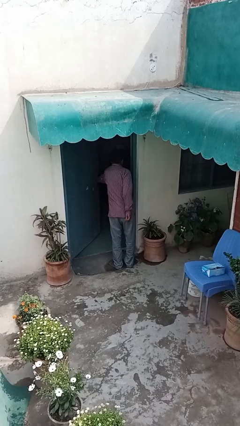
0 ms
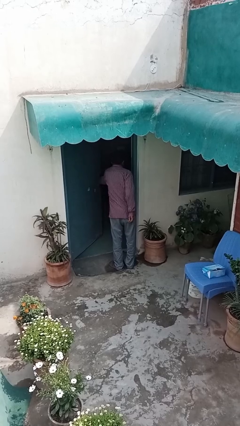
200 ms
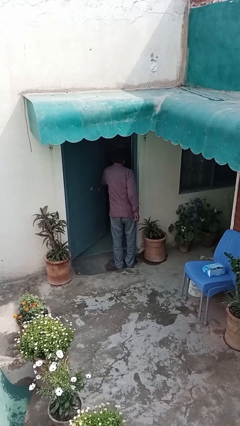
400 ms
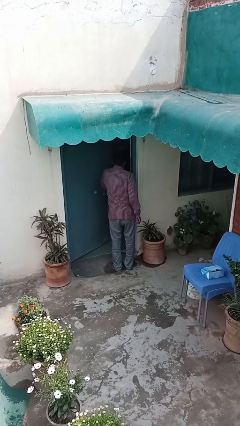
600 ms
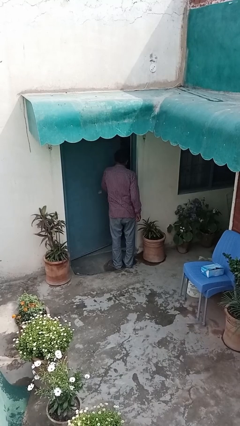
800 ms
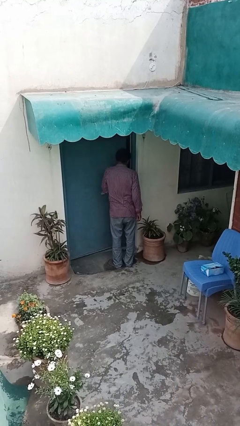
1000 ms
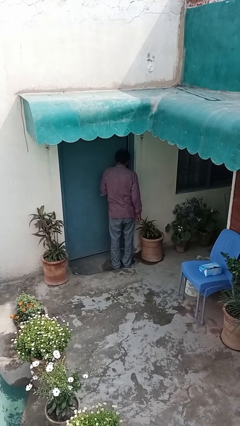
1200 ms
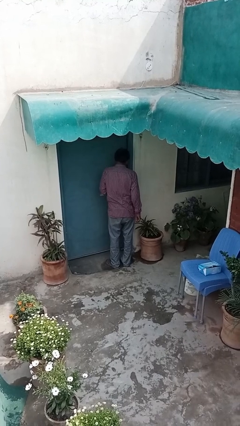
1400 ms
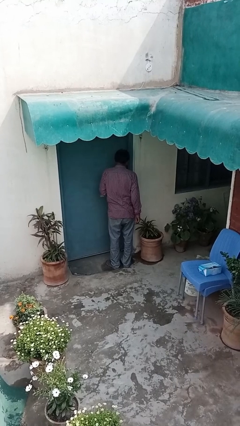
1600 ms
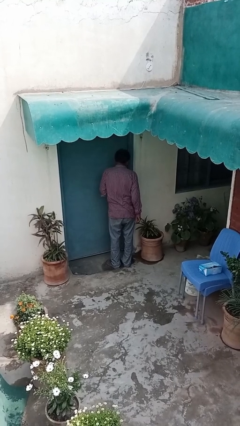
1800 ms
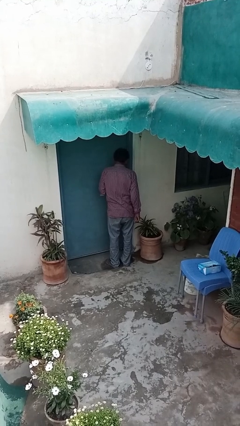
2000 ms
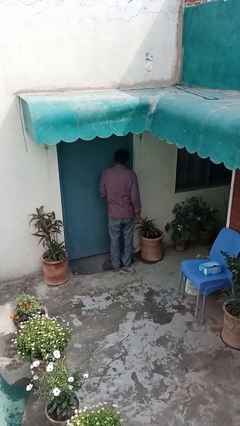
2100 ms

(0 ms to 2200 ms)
person closes facility door

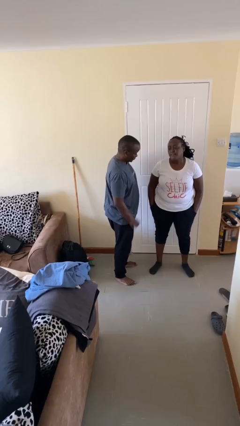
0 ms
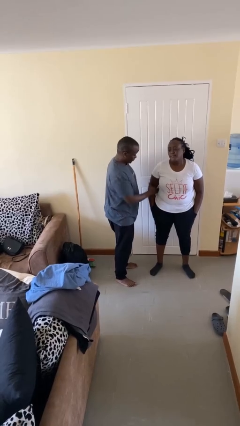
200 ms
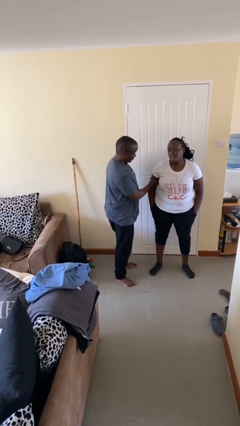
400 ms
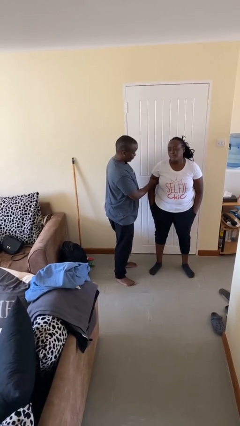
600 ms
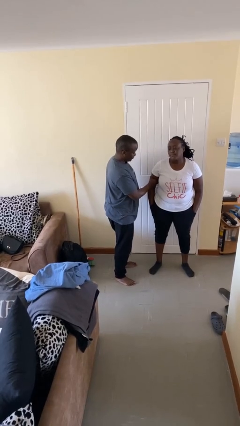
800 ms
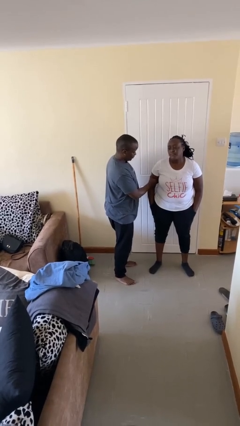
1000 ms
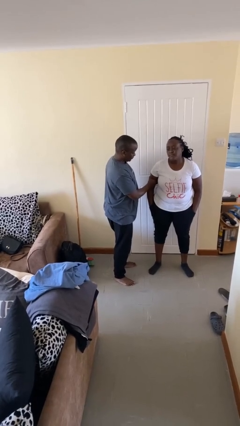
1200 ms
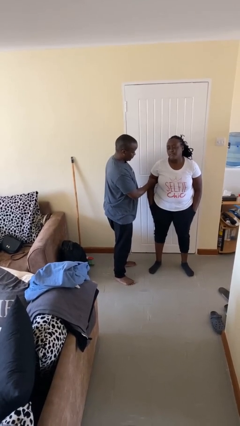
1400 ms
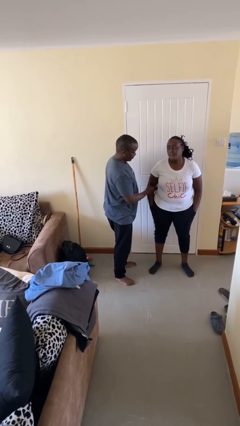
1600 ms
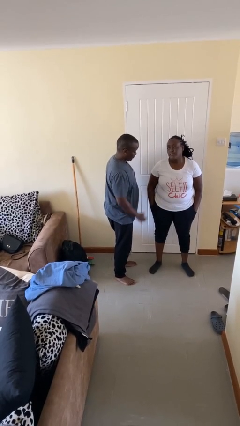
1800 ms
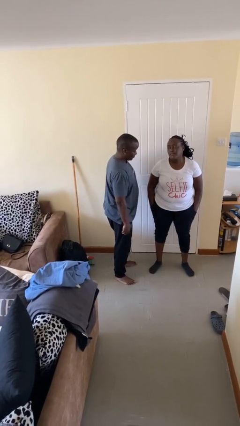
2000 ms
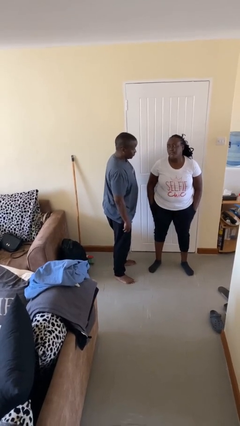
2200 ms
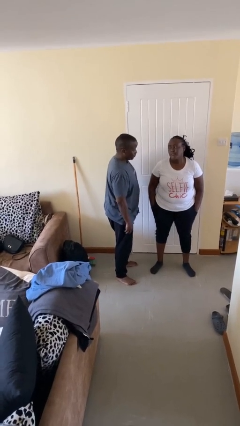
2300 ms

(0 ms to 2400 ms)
person grabs person by bicep

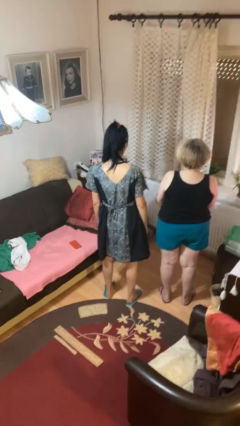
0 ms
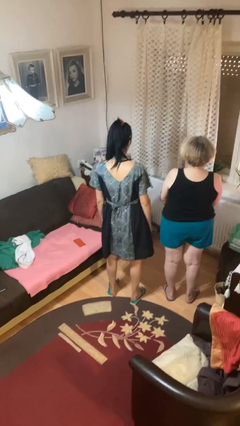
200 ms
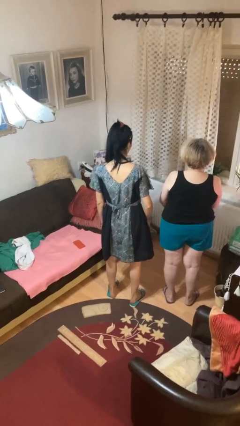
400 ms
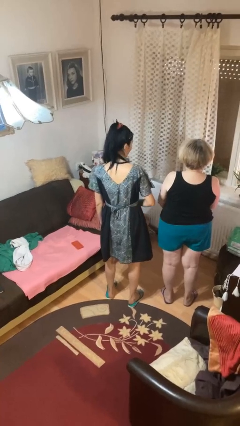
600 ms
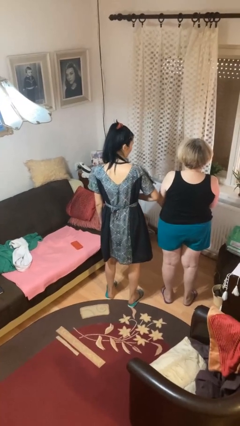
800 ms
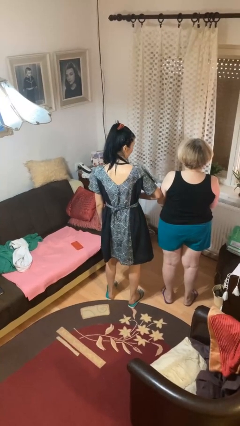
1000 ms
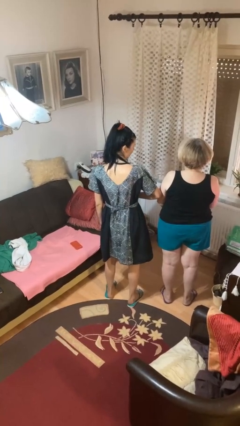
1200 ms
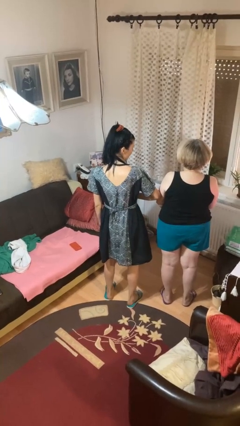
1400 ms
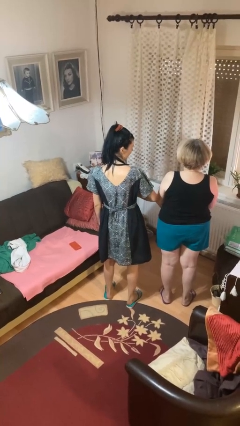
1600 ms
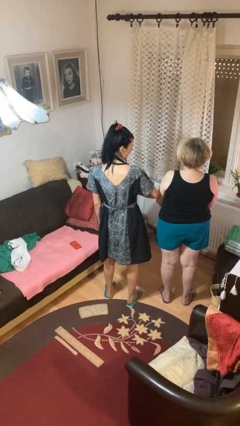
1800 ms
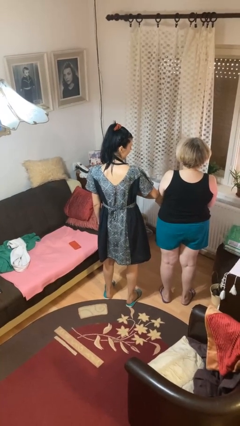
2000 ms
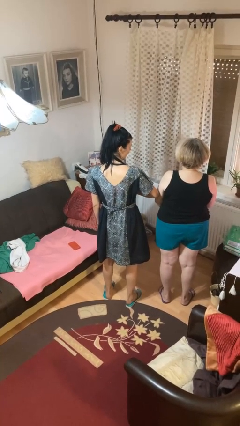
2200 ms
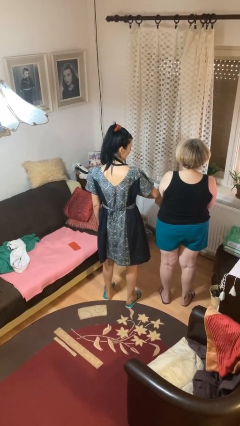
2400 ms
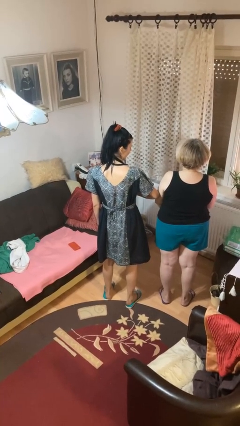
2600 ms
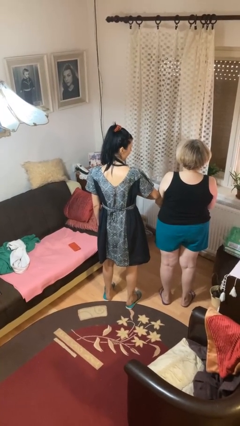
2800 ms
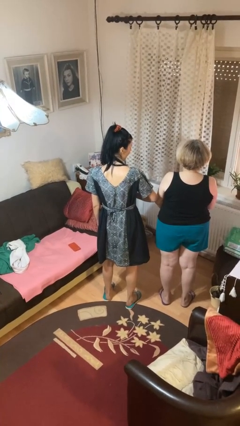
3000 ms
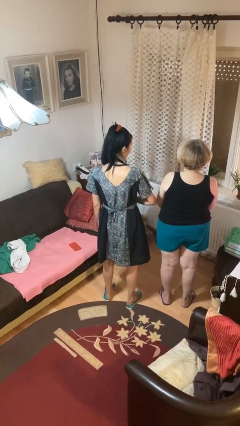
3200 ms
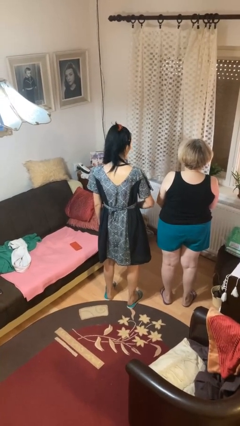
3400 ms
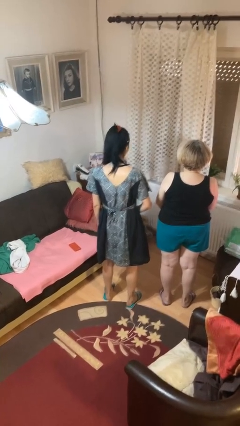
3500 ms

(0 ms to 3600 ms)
person nudges person with elbow

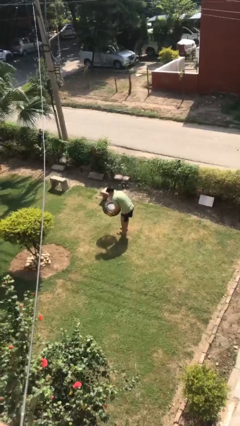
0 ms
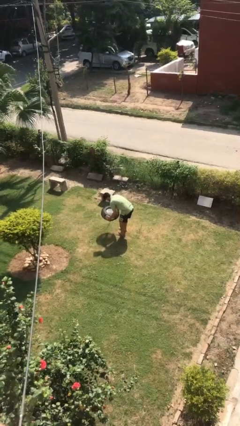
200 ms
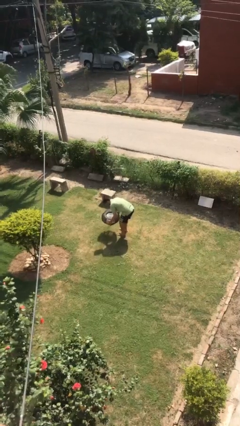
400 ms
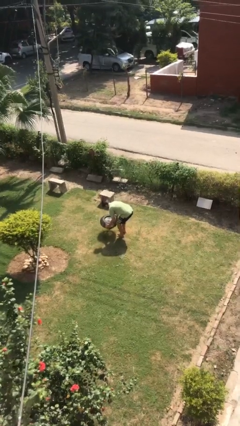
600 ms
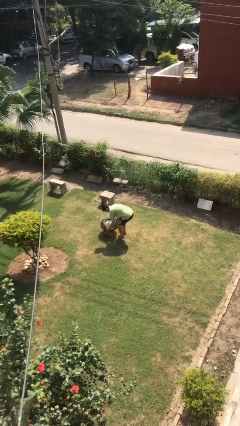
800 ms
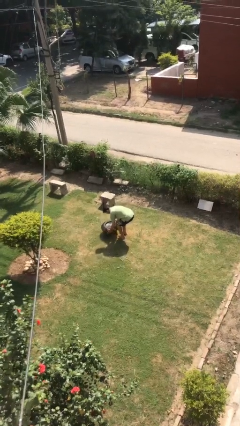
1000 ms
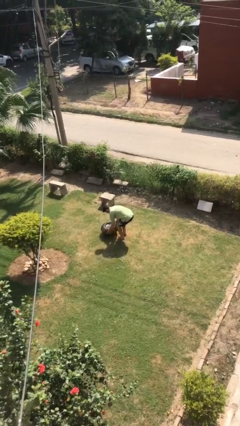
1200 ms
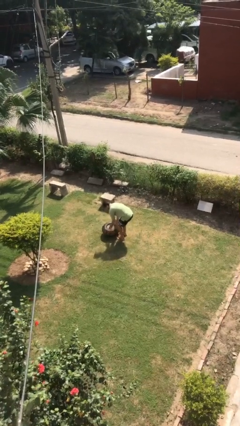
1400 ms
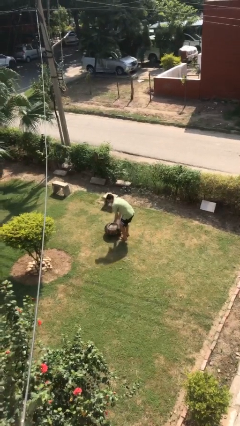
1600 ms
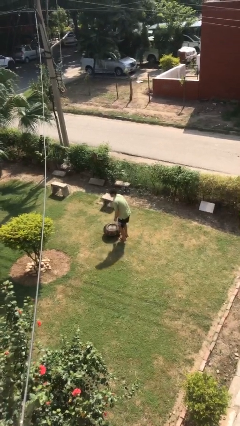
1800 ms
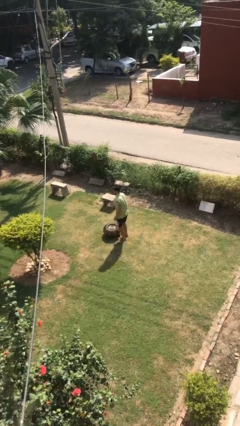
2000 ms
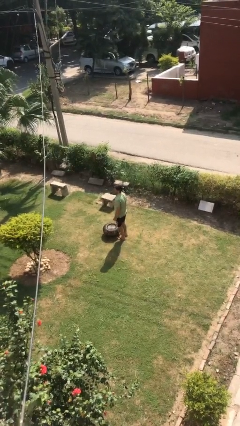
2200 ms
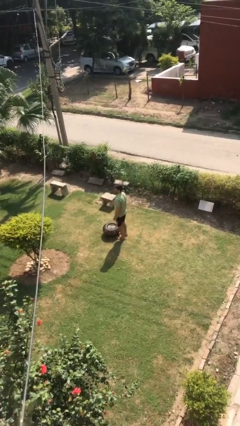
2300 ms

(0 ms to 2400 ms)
person puts down object on floor

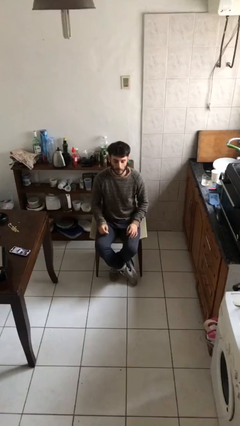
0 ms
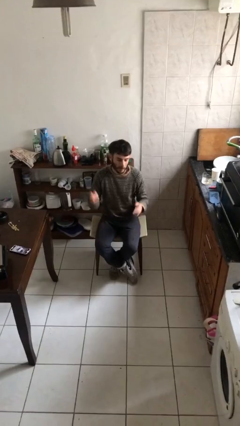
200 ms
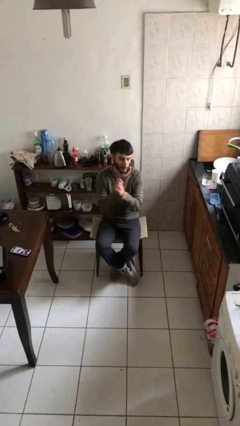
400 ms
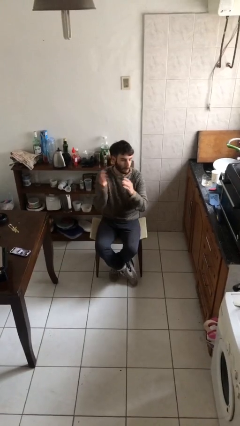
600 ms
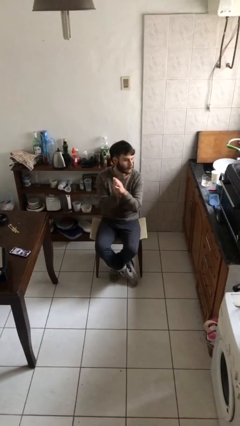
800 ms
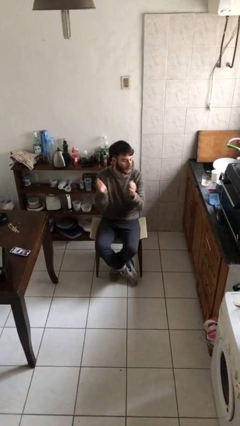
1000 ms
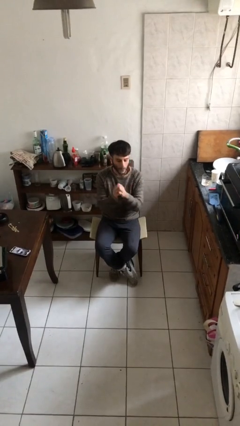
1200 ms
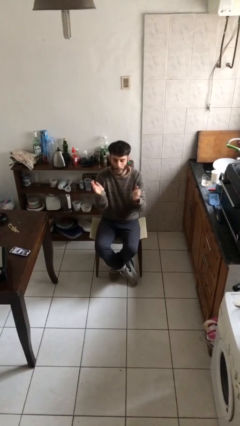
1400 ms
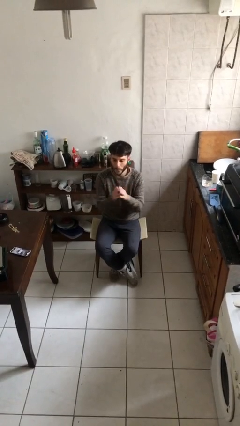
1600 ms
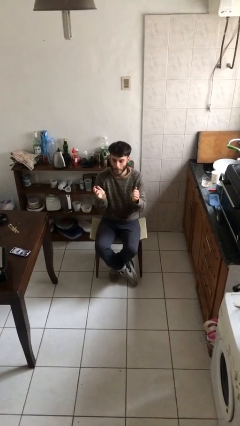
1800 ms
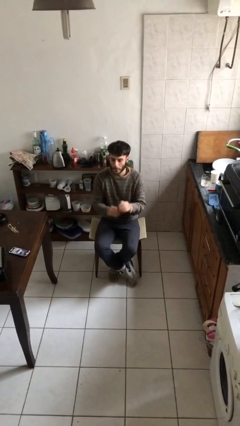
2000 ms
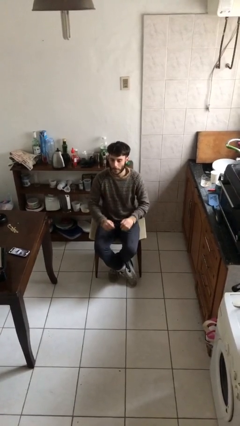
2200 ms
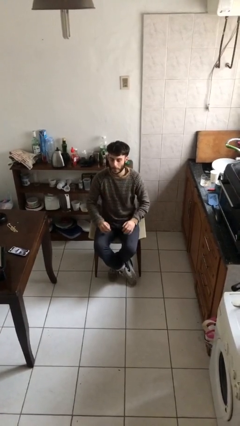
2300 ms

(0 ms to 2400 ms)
person claps hands

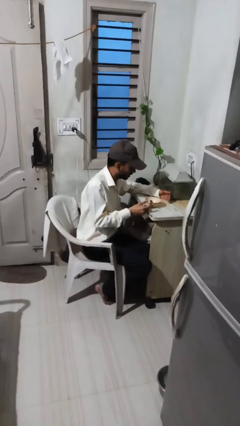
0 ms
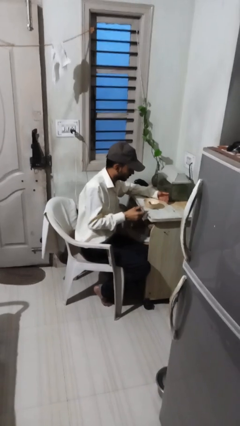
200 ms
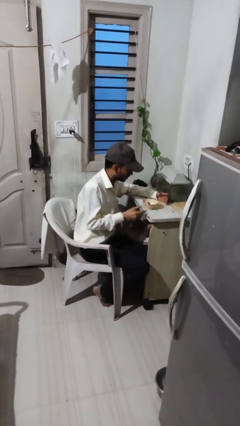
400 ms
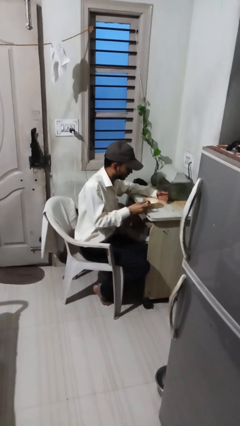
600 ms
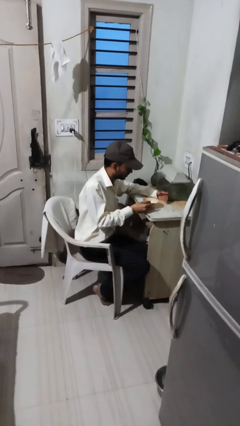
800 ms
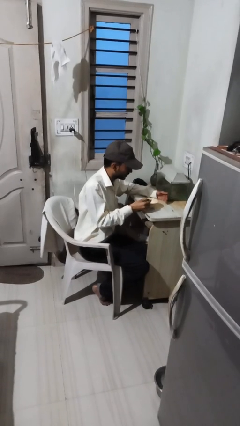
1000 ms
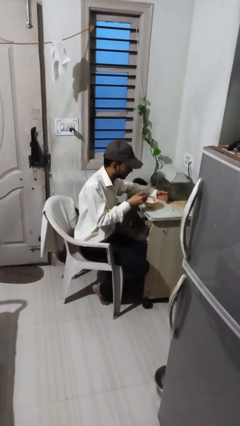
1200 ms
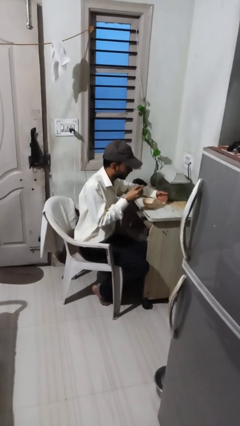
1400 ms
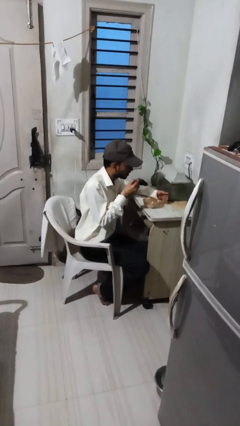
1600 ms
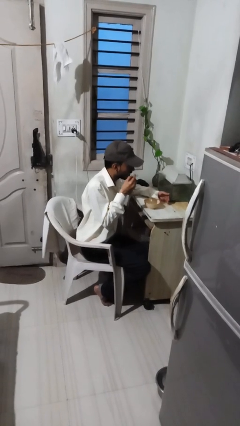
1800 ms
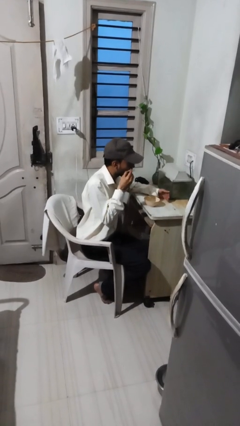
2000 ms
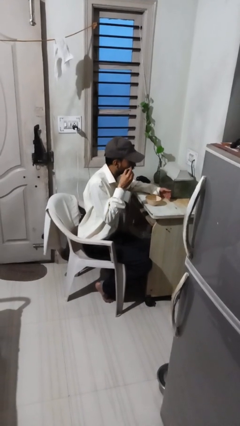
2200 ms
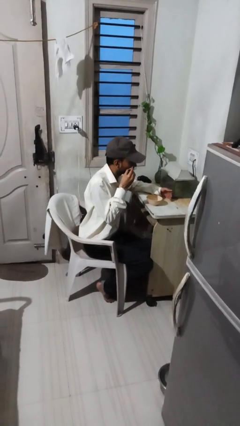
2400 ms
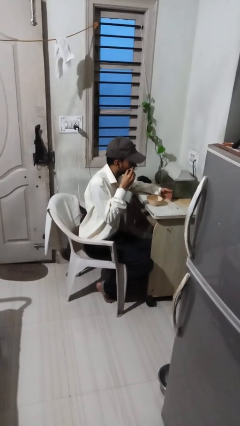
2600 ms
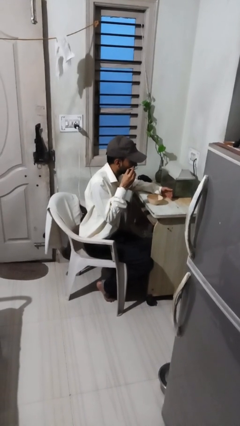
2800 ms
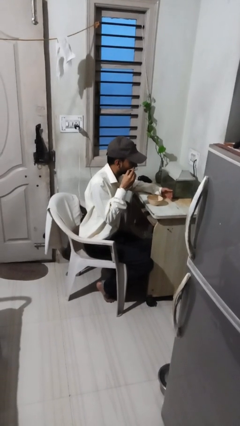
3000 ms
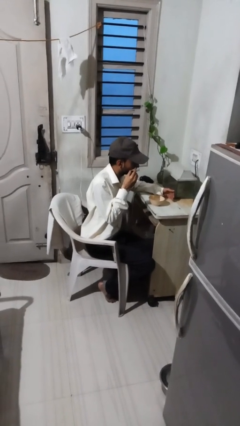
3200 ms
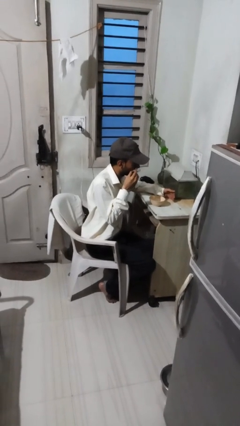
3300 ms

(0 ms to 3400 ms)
person eats with utensil

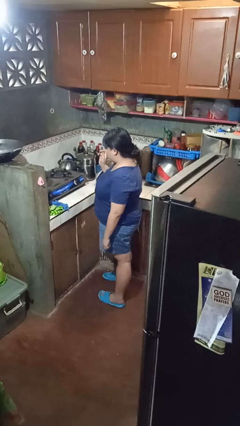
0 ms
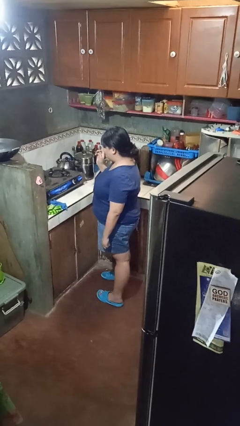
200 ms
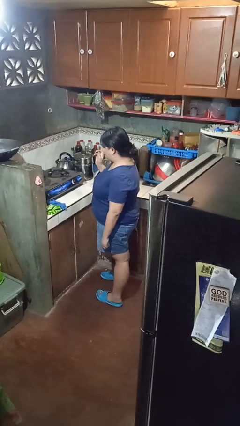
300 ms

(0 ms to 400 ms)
person burns hand
